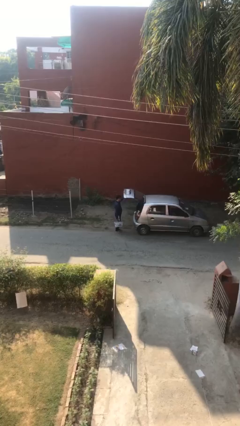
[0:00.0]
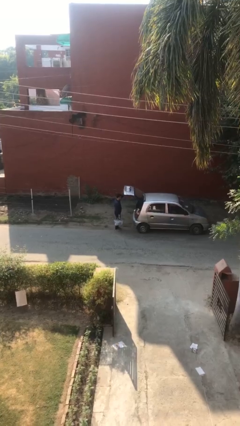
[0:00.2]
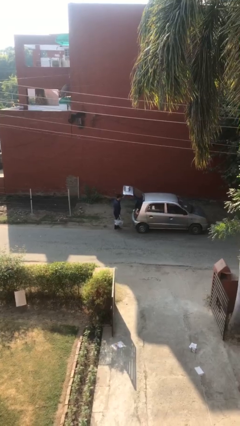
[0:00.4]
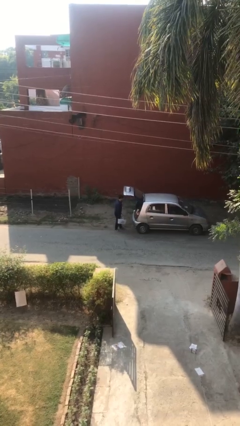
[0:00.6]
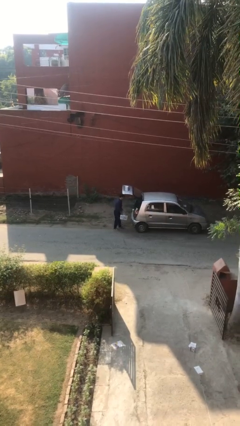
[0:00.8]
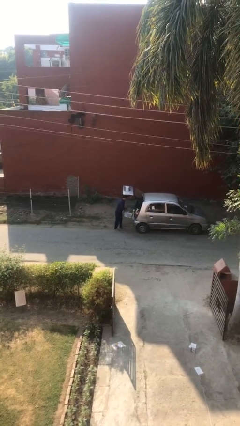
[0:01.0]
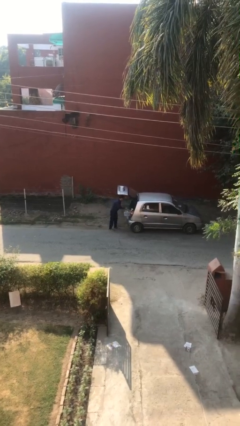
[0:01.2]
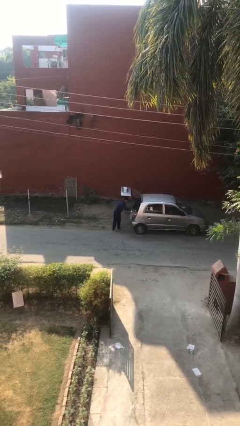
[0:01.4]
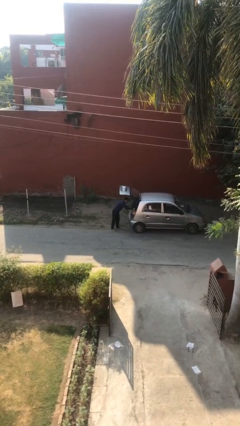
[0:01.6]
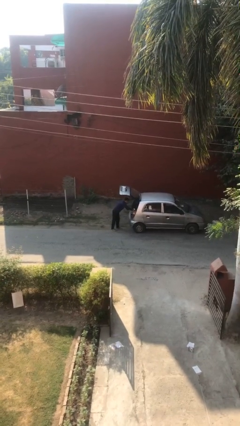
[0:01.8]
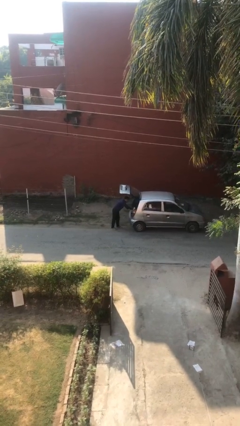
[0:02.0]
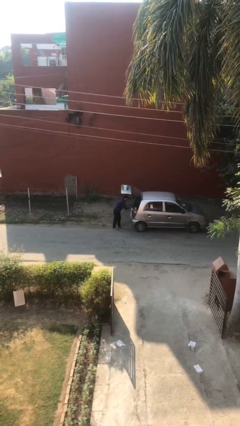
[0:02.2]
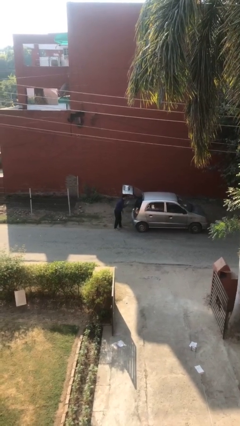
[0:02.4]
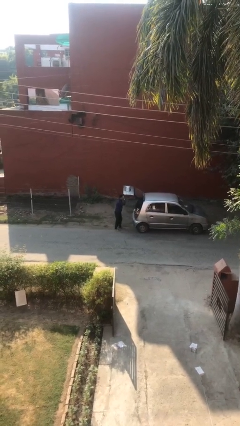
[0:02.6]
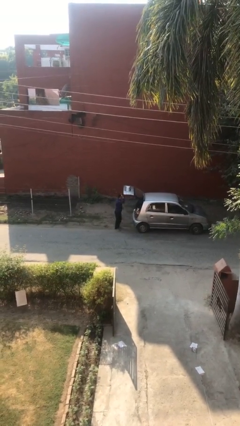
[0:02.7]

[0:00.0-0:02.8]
person loads car

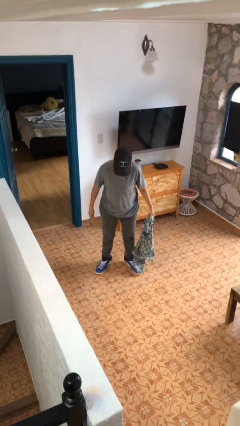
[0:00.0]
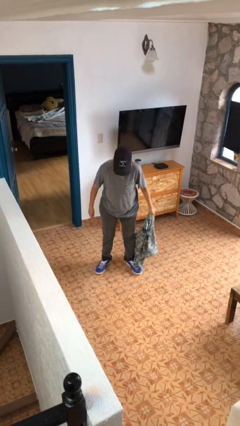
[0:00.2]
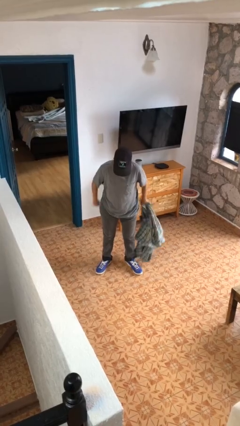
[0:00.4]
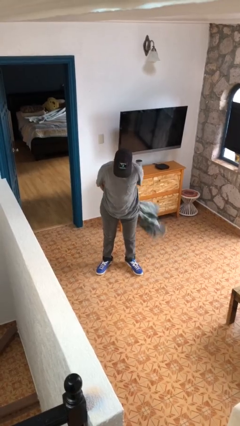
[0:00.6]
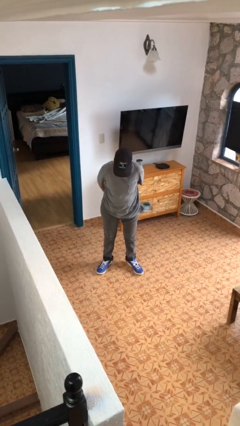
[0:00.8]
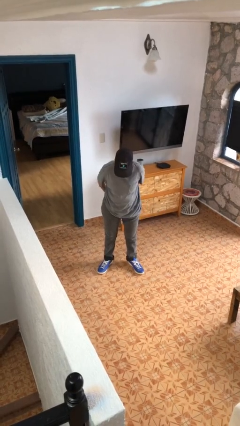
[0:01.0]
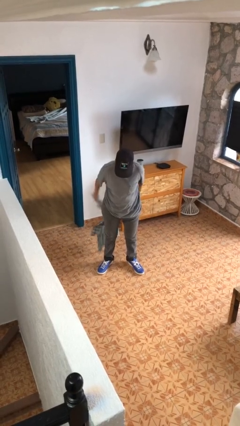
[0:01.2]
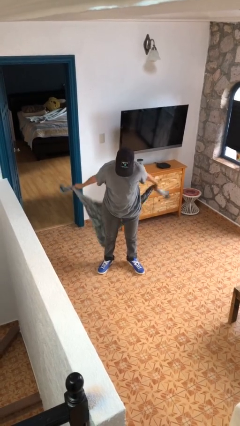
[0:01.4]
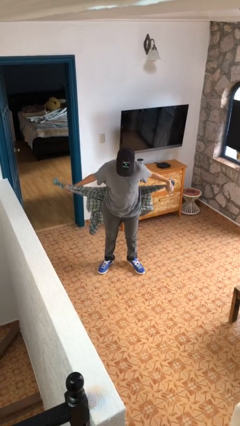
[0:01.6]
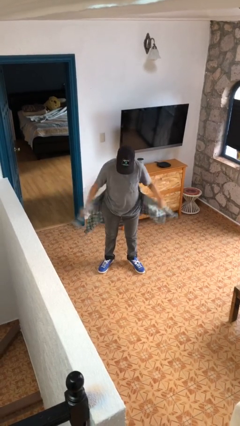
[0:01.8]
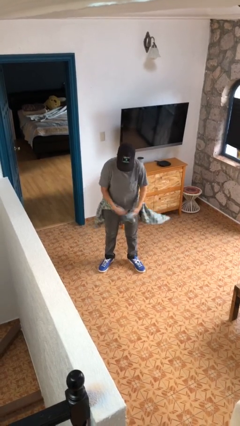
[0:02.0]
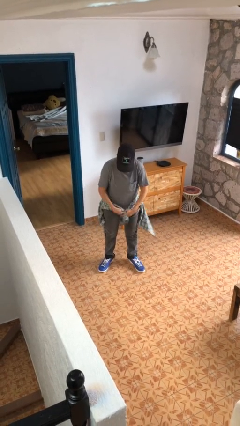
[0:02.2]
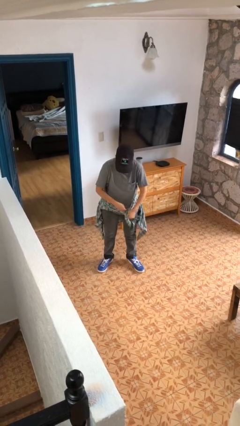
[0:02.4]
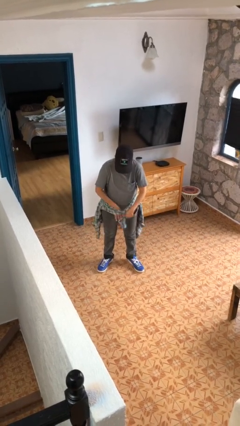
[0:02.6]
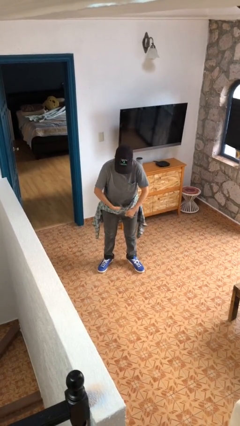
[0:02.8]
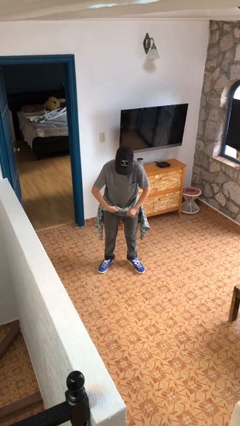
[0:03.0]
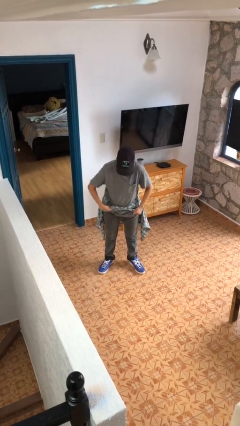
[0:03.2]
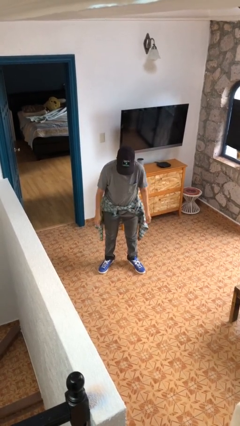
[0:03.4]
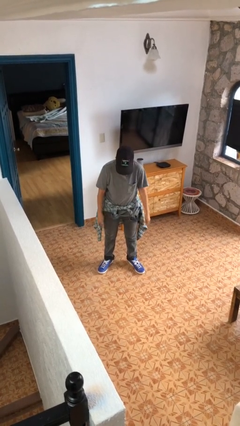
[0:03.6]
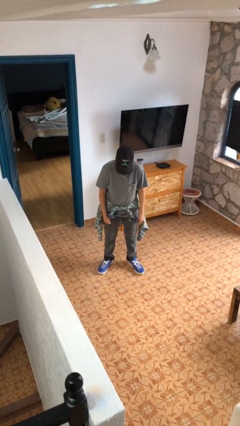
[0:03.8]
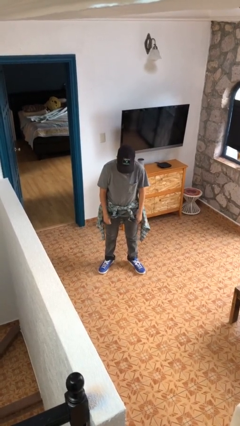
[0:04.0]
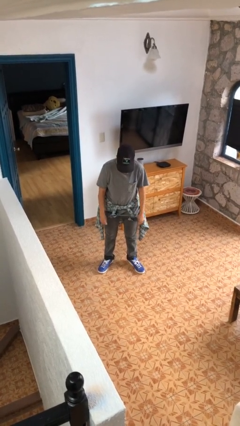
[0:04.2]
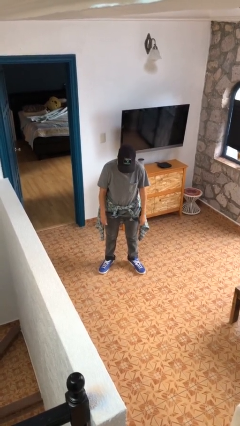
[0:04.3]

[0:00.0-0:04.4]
person ties jacket around waist

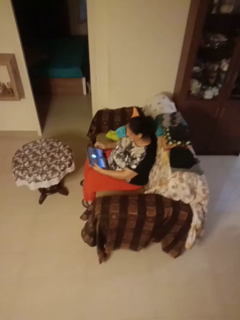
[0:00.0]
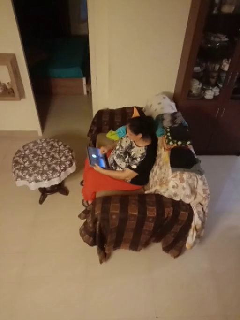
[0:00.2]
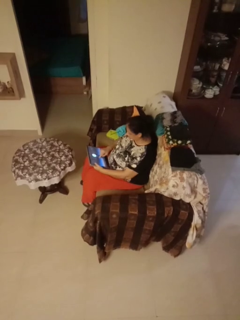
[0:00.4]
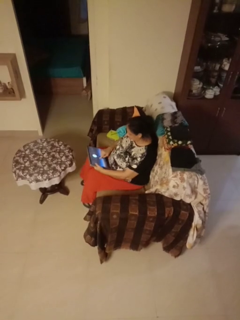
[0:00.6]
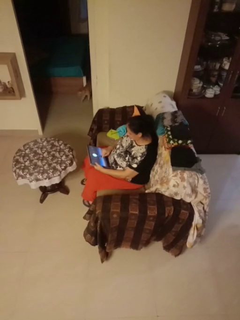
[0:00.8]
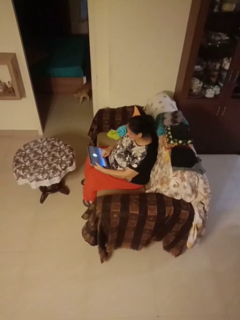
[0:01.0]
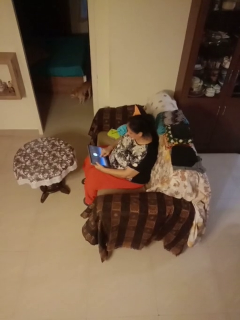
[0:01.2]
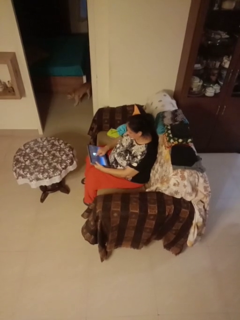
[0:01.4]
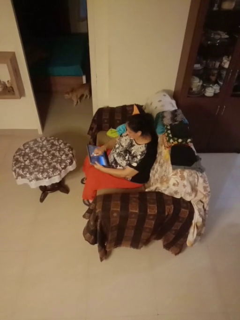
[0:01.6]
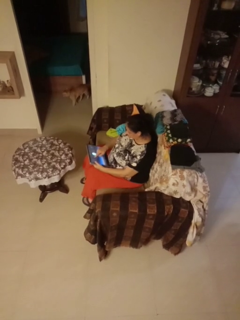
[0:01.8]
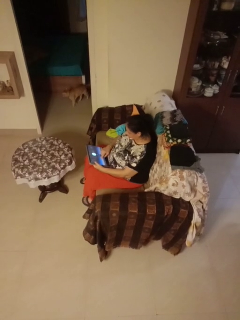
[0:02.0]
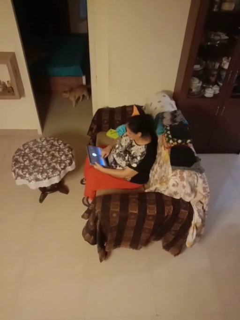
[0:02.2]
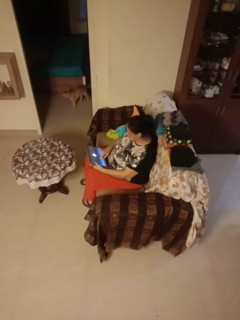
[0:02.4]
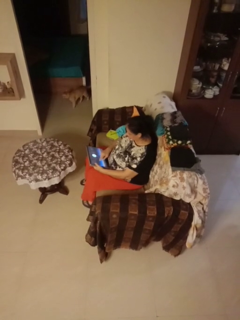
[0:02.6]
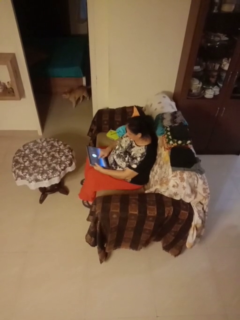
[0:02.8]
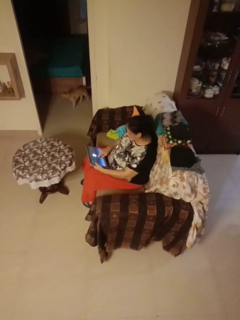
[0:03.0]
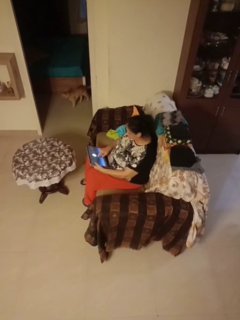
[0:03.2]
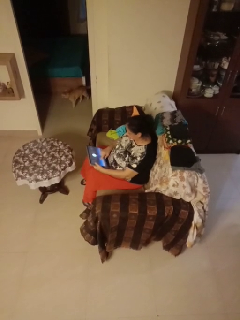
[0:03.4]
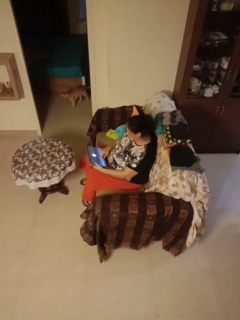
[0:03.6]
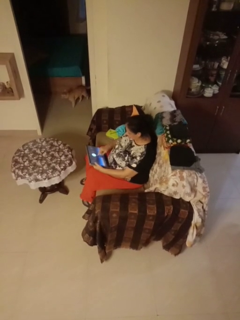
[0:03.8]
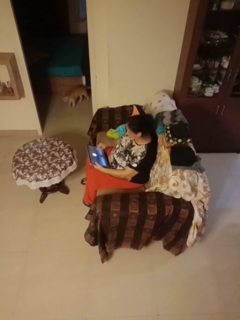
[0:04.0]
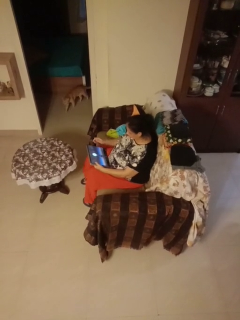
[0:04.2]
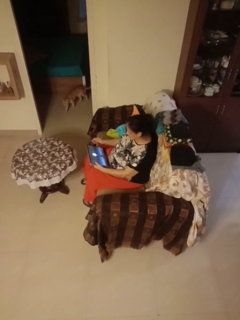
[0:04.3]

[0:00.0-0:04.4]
person interacts with tablet

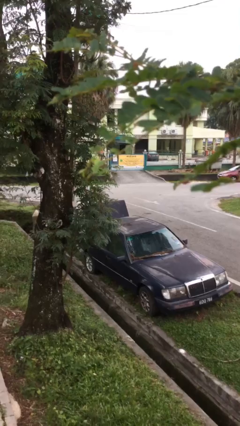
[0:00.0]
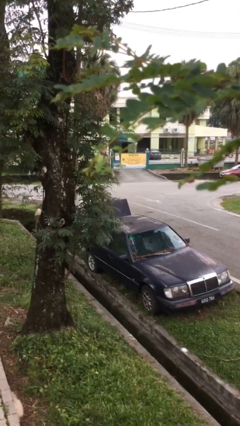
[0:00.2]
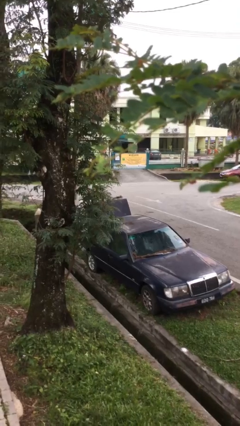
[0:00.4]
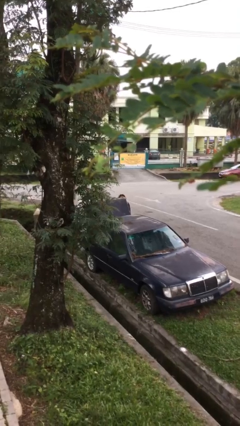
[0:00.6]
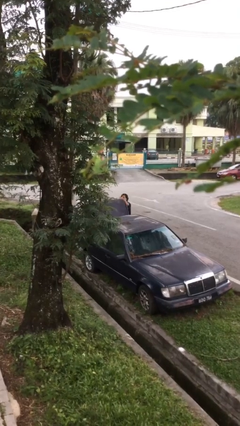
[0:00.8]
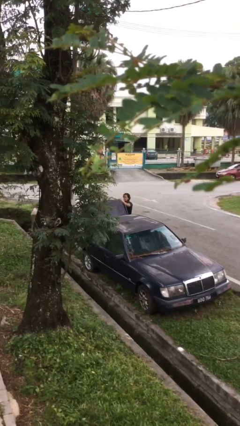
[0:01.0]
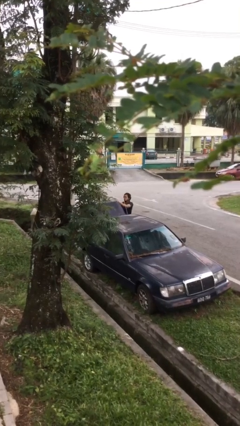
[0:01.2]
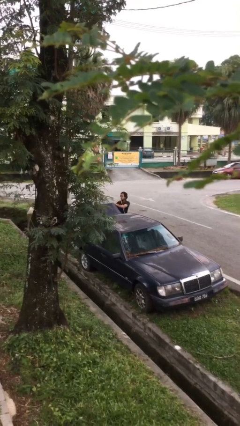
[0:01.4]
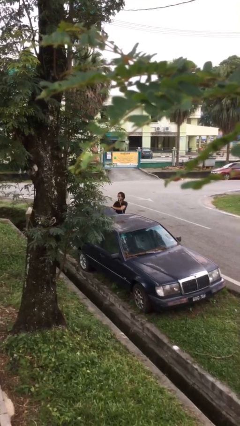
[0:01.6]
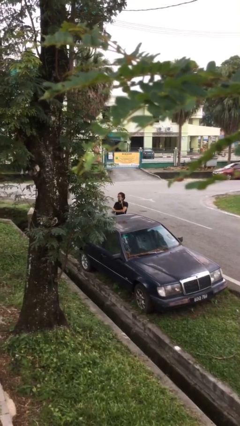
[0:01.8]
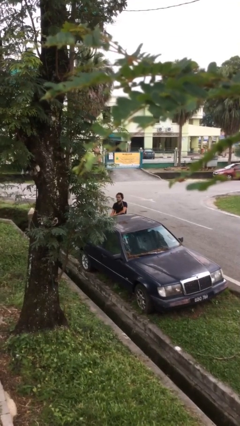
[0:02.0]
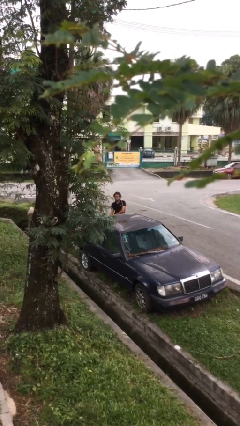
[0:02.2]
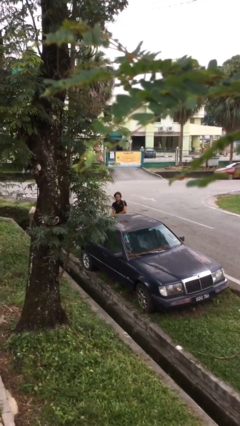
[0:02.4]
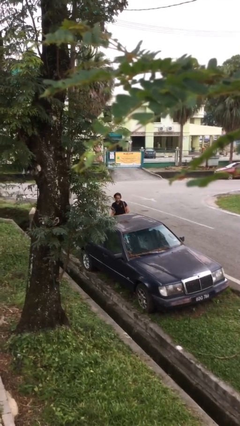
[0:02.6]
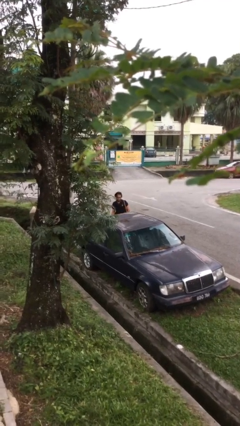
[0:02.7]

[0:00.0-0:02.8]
person closes car trunk

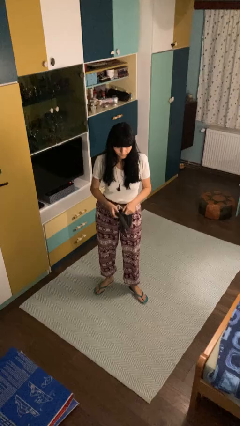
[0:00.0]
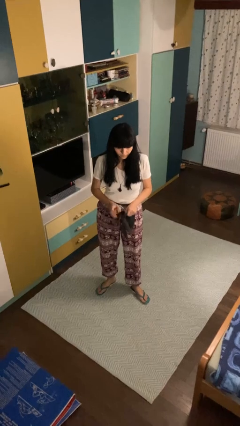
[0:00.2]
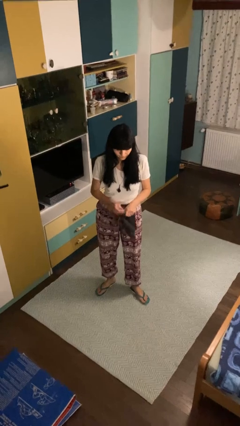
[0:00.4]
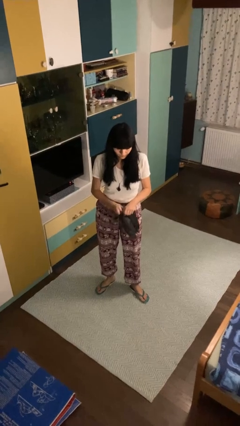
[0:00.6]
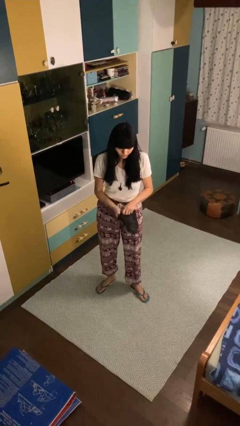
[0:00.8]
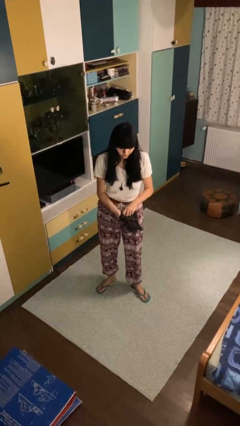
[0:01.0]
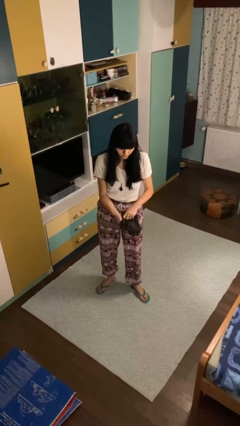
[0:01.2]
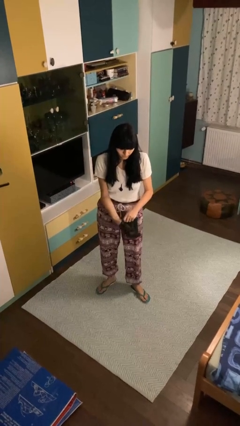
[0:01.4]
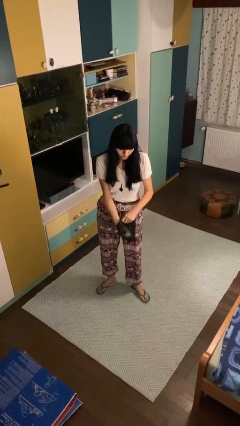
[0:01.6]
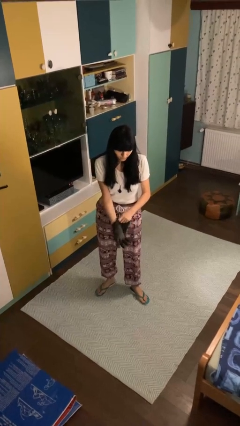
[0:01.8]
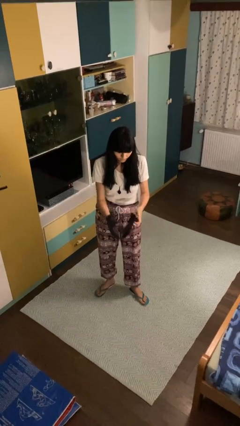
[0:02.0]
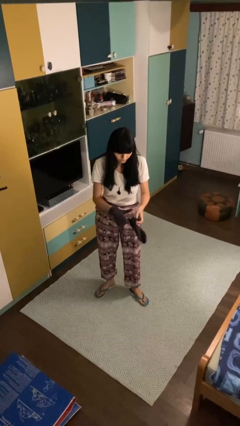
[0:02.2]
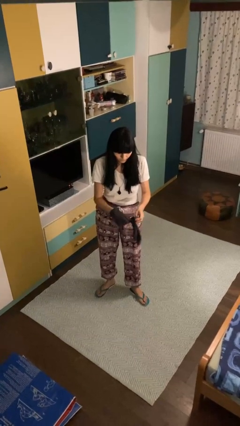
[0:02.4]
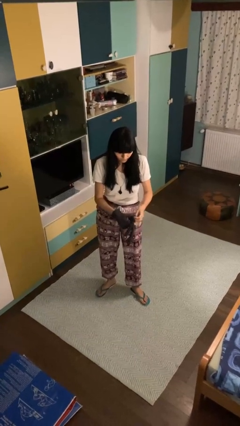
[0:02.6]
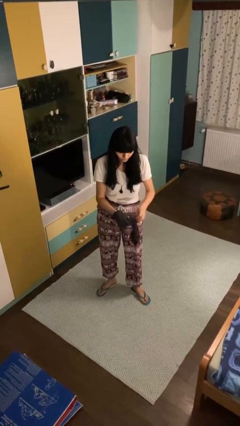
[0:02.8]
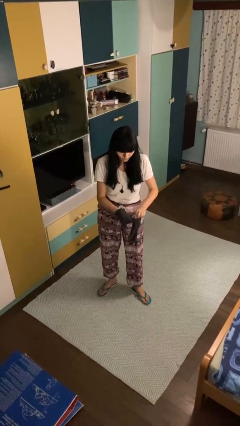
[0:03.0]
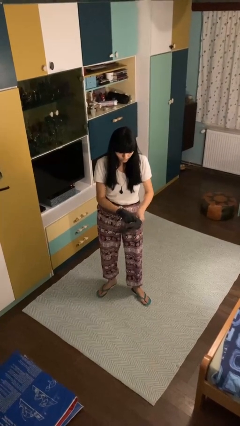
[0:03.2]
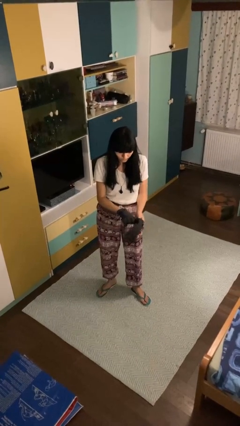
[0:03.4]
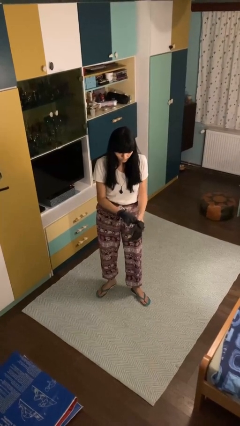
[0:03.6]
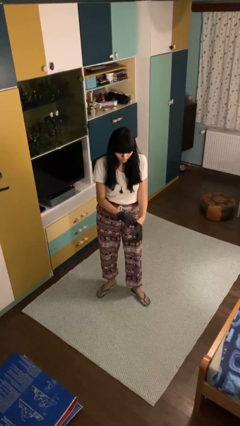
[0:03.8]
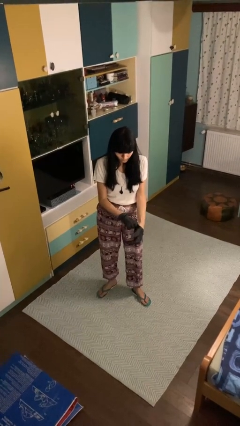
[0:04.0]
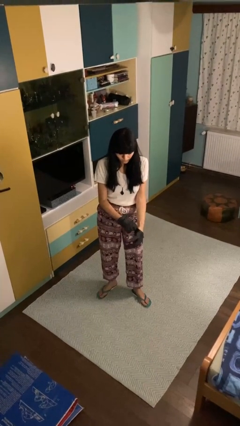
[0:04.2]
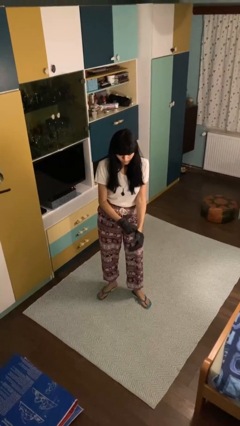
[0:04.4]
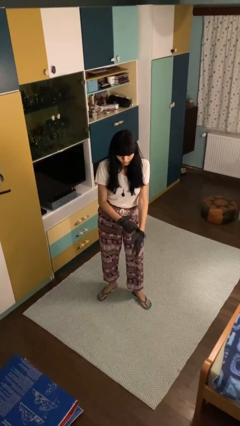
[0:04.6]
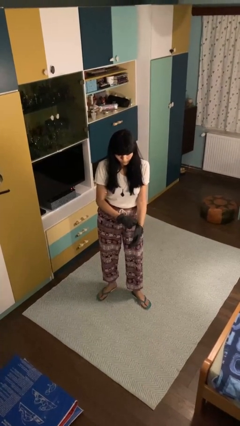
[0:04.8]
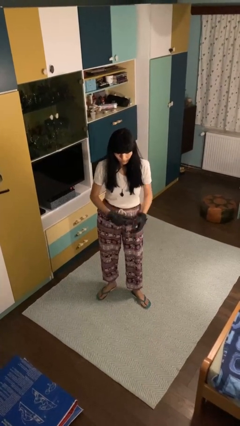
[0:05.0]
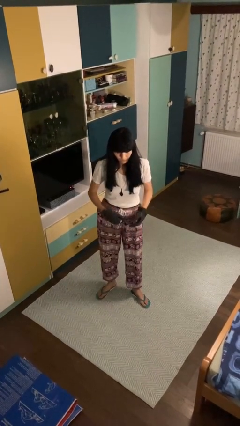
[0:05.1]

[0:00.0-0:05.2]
person puts on gloves
